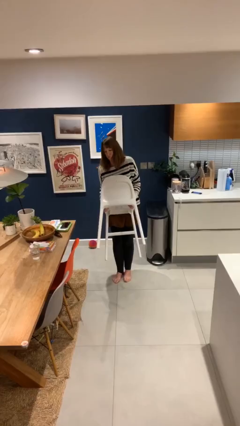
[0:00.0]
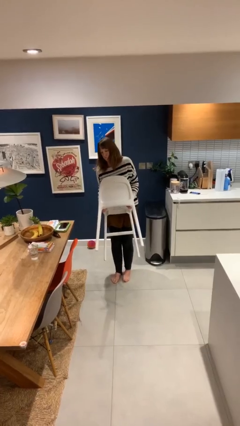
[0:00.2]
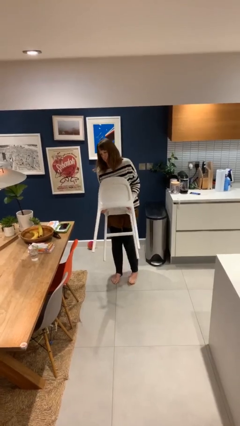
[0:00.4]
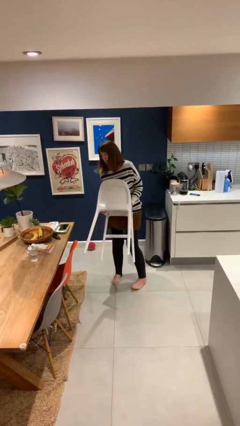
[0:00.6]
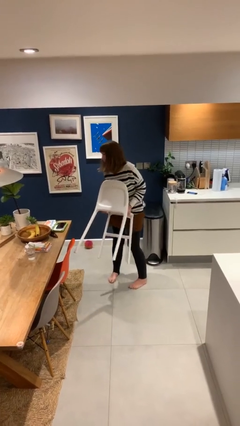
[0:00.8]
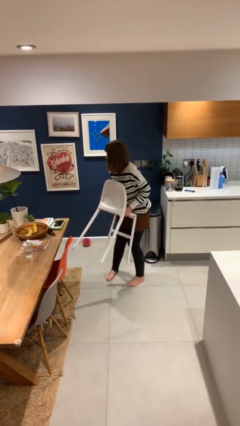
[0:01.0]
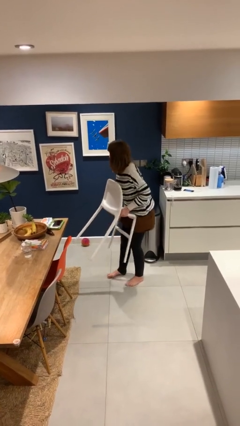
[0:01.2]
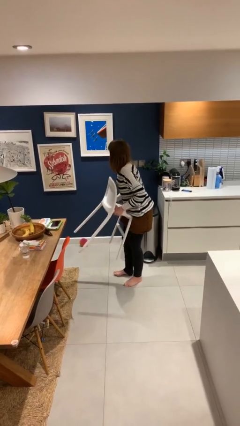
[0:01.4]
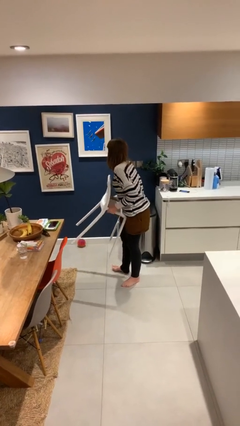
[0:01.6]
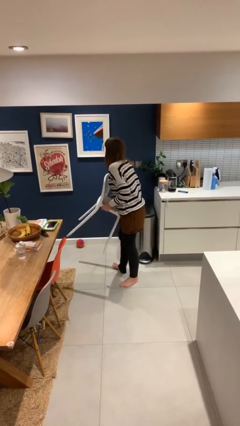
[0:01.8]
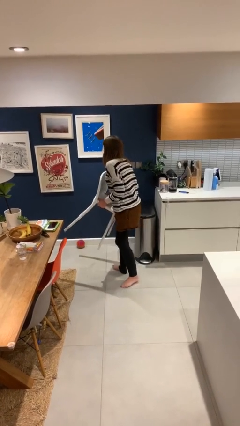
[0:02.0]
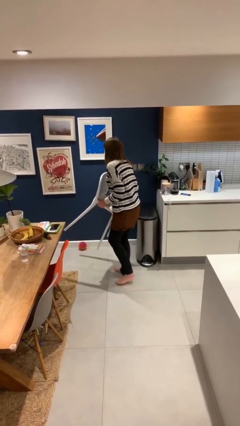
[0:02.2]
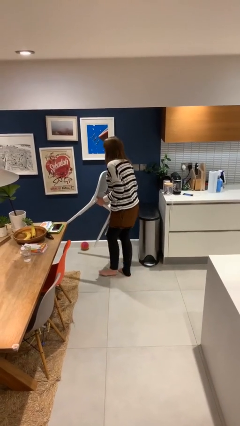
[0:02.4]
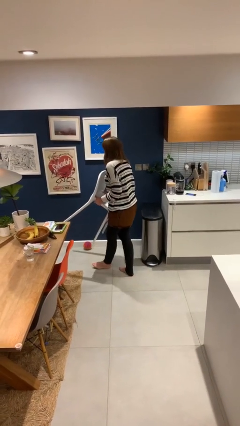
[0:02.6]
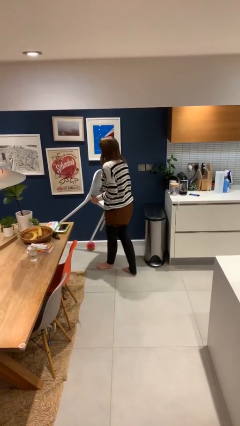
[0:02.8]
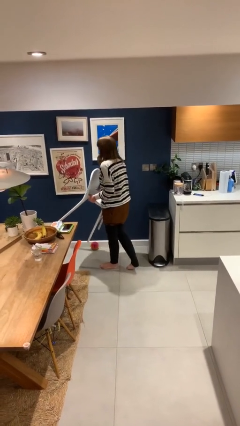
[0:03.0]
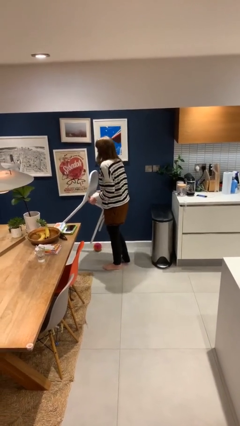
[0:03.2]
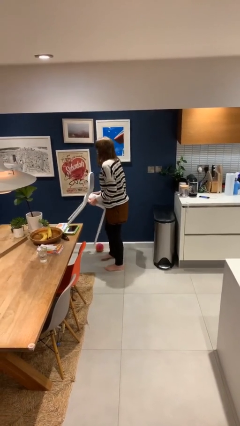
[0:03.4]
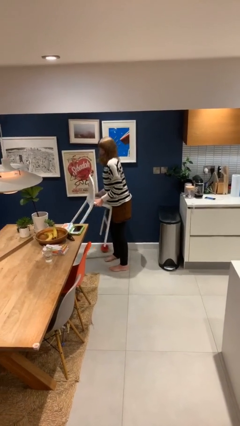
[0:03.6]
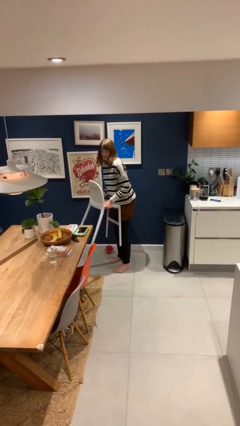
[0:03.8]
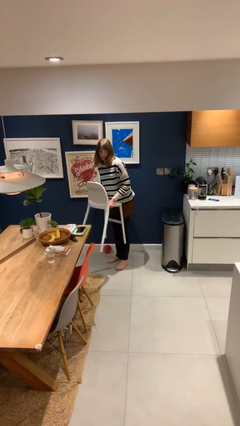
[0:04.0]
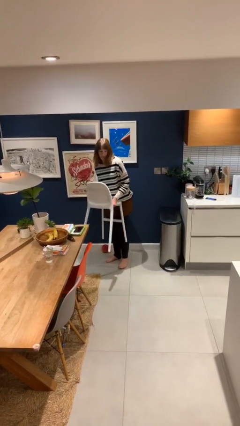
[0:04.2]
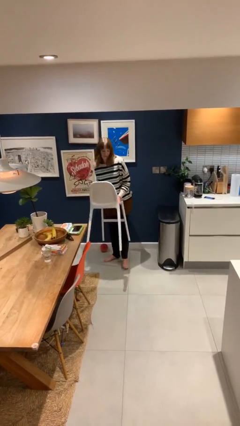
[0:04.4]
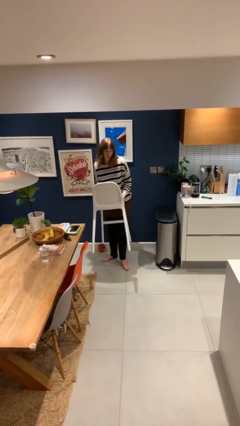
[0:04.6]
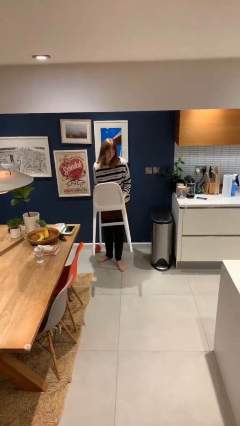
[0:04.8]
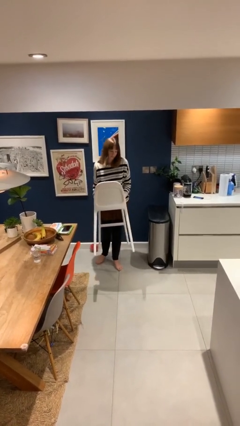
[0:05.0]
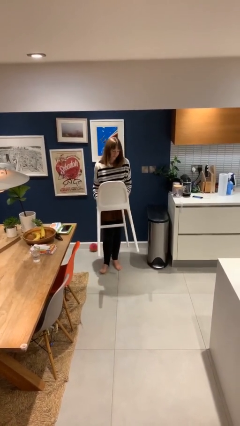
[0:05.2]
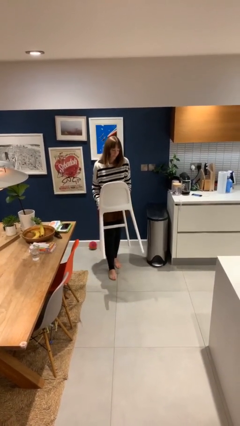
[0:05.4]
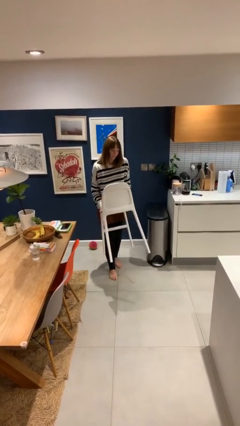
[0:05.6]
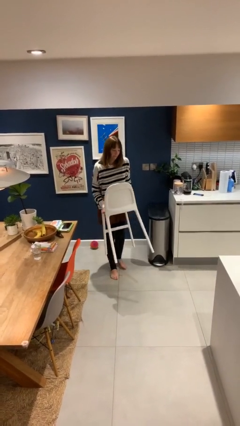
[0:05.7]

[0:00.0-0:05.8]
person carries heavy object

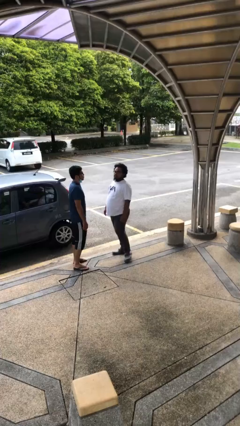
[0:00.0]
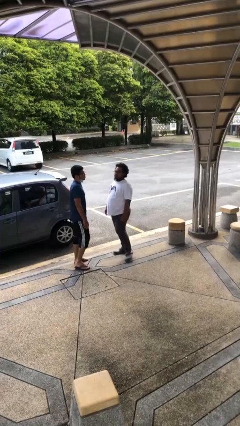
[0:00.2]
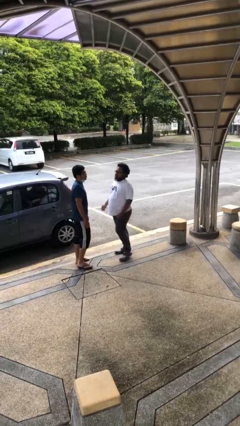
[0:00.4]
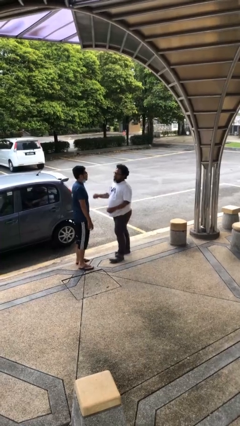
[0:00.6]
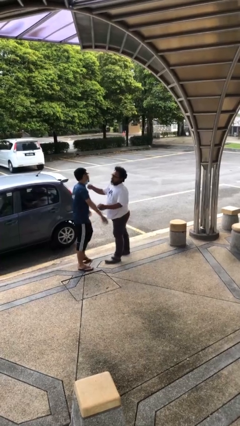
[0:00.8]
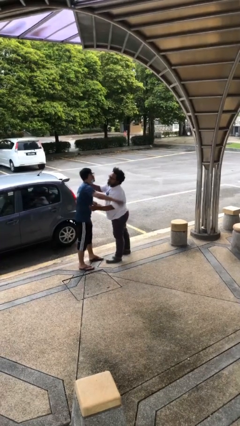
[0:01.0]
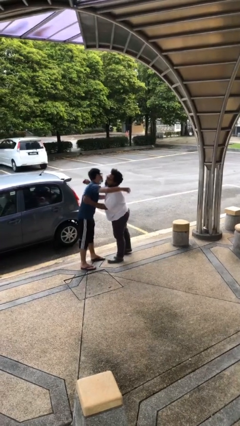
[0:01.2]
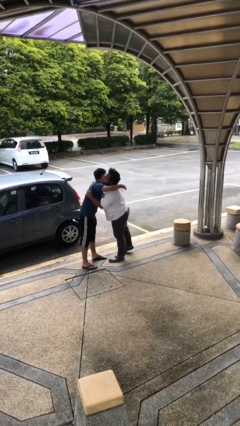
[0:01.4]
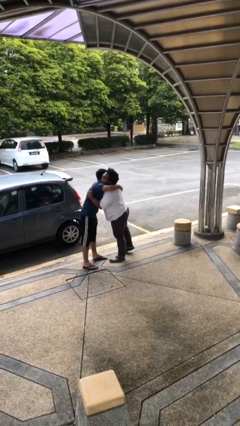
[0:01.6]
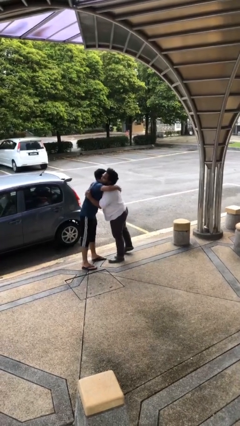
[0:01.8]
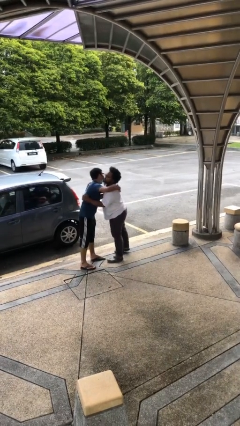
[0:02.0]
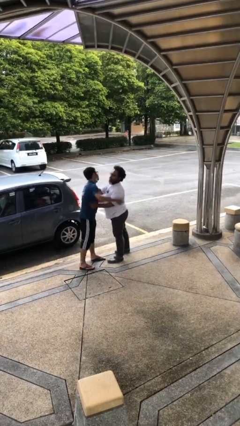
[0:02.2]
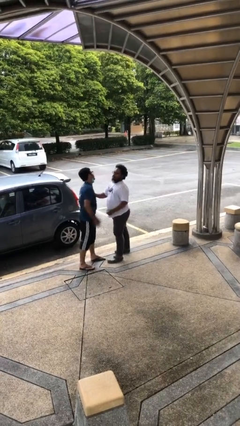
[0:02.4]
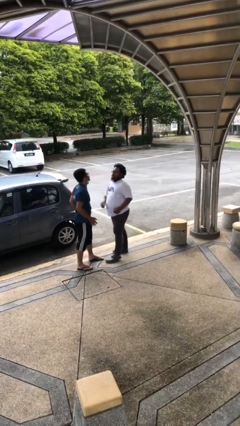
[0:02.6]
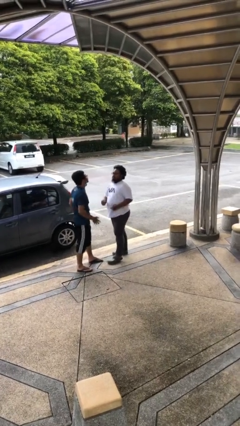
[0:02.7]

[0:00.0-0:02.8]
person embraces person

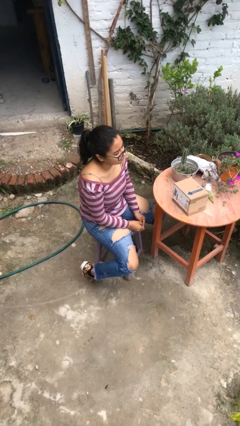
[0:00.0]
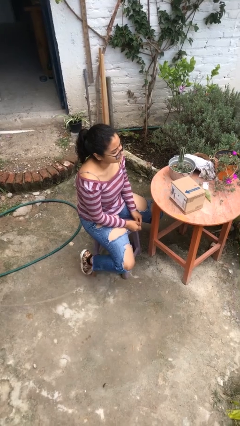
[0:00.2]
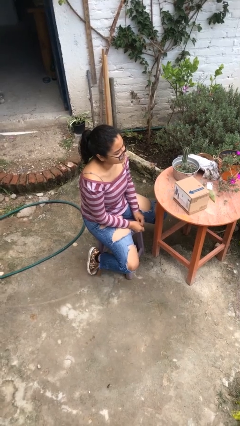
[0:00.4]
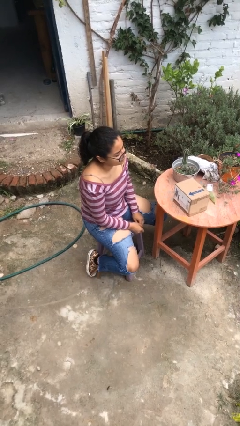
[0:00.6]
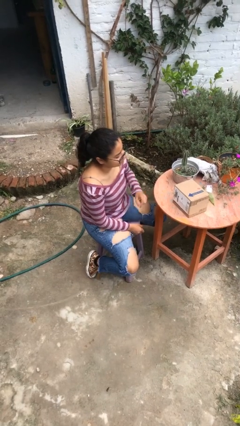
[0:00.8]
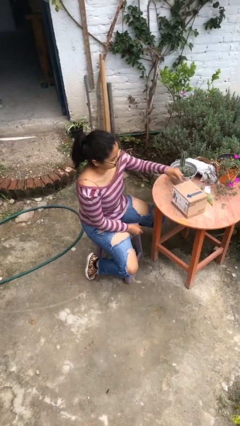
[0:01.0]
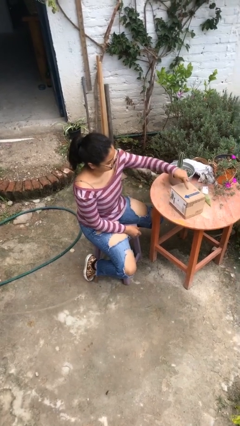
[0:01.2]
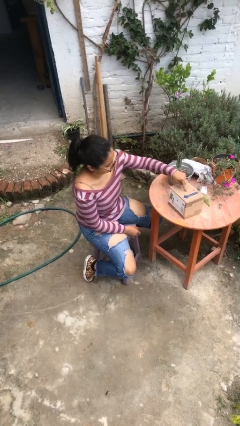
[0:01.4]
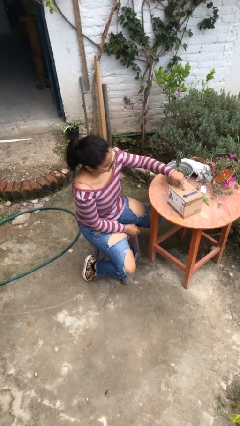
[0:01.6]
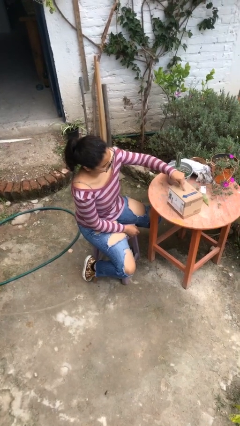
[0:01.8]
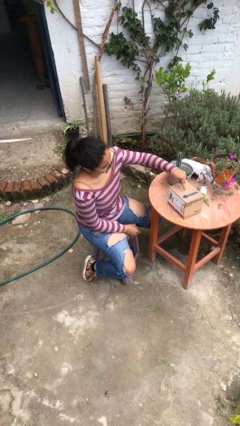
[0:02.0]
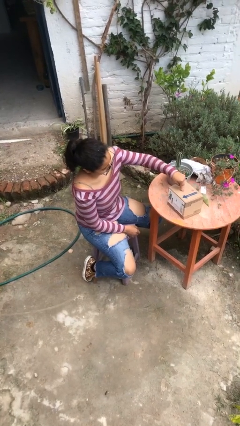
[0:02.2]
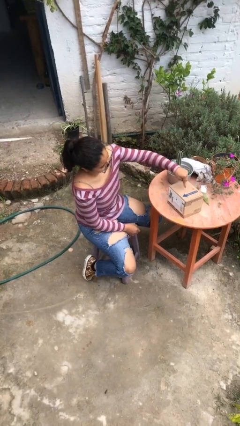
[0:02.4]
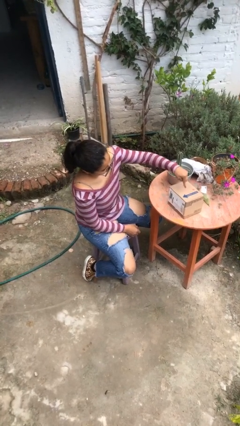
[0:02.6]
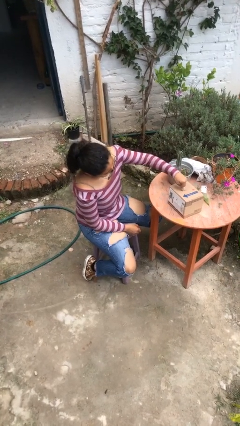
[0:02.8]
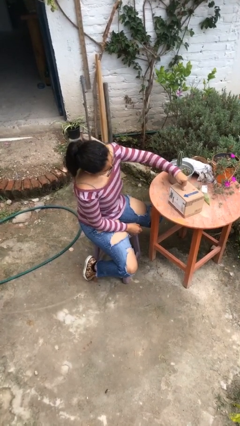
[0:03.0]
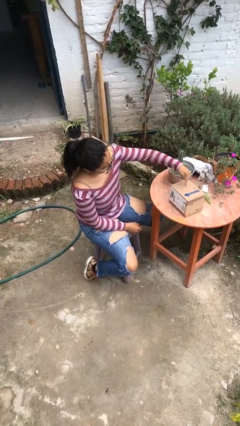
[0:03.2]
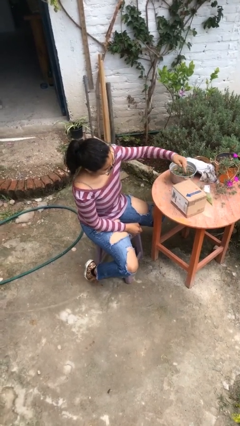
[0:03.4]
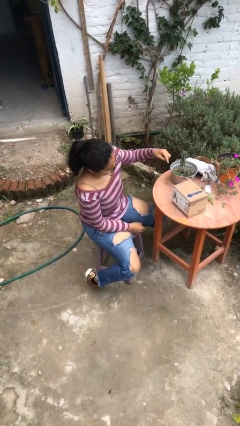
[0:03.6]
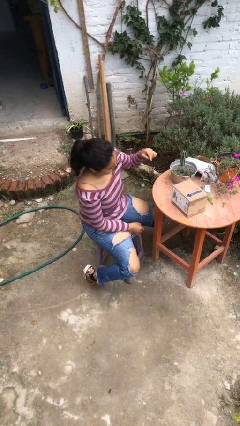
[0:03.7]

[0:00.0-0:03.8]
person taps object with finger

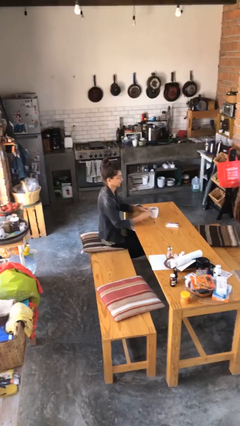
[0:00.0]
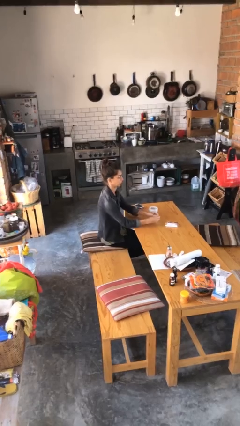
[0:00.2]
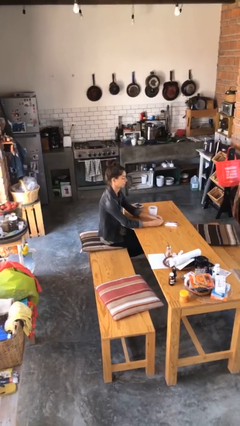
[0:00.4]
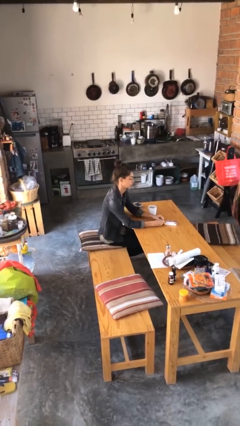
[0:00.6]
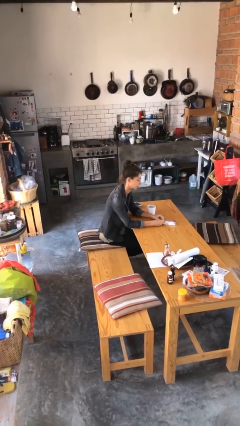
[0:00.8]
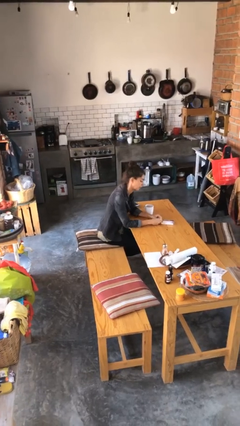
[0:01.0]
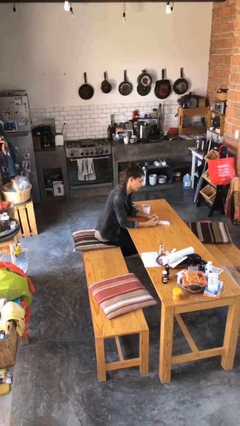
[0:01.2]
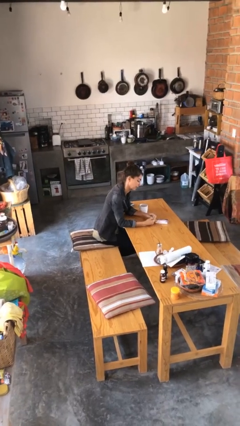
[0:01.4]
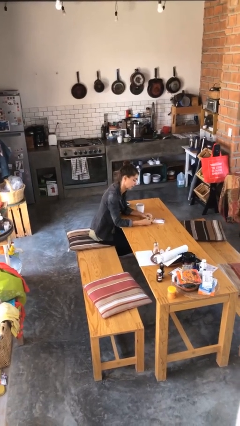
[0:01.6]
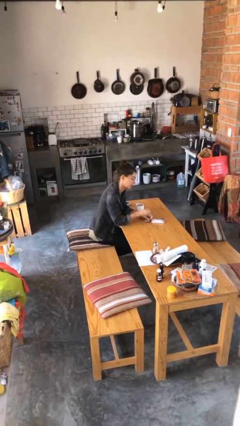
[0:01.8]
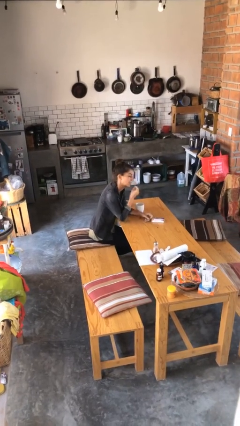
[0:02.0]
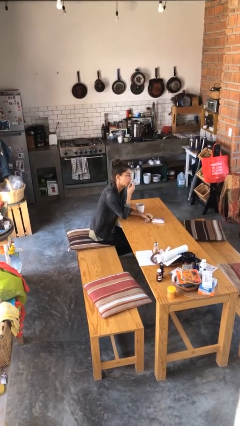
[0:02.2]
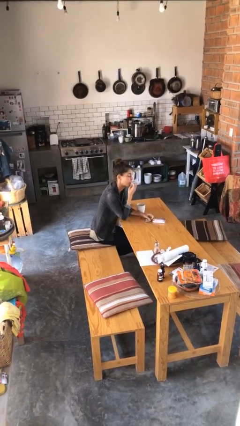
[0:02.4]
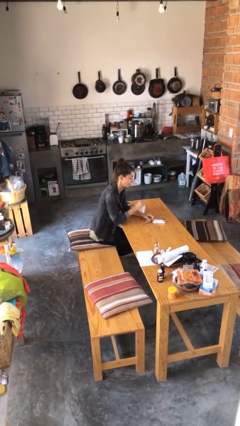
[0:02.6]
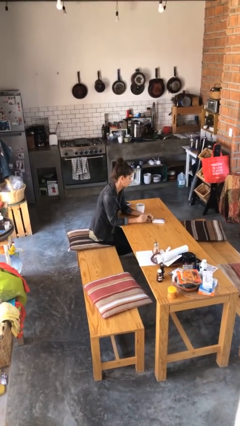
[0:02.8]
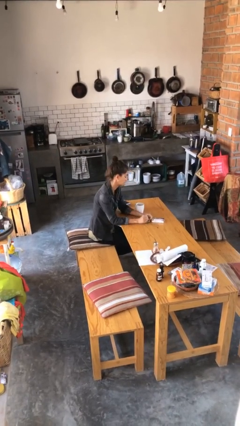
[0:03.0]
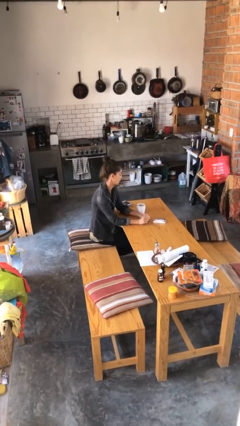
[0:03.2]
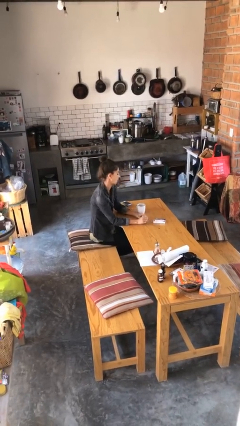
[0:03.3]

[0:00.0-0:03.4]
person takes medicine pills

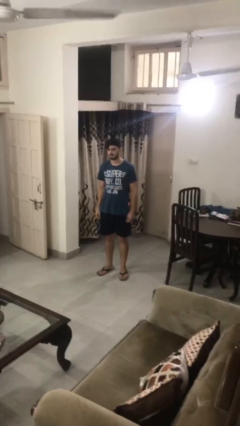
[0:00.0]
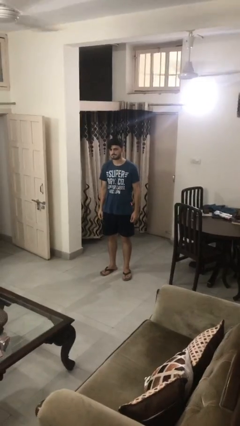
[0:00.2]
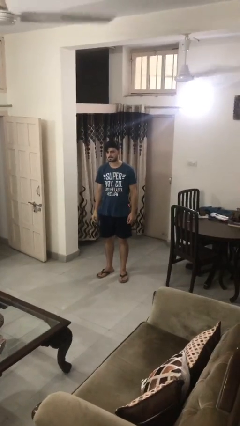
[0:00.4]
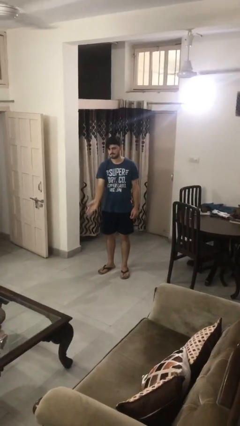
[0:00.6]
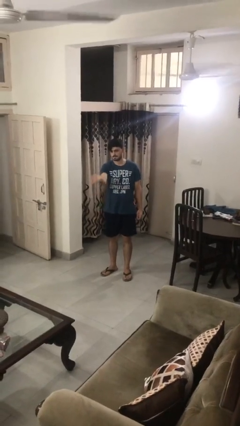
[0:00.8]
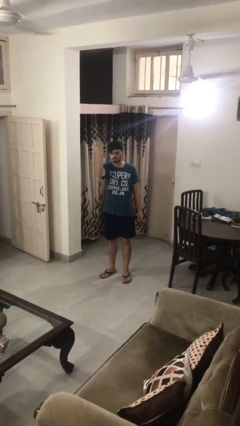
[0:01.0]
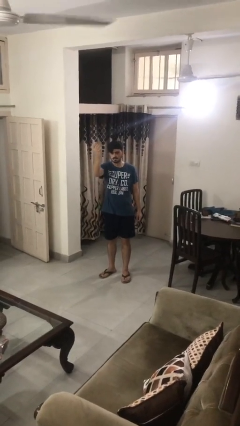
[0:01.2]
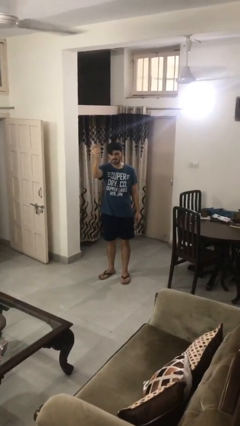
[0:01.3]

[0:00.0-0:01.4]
person gestures swipe up

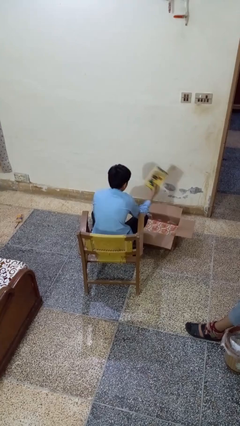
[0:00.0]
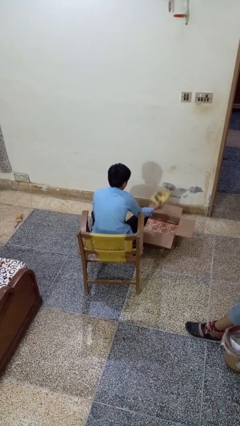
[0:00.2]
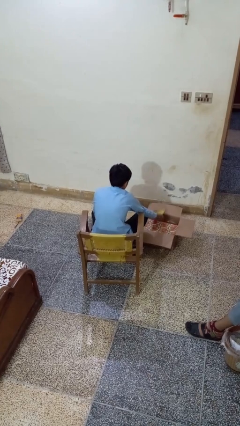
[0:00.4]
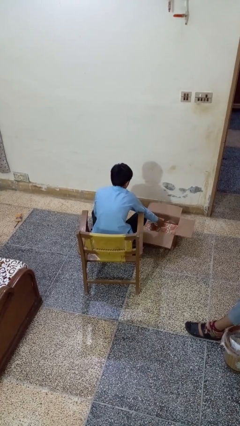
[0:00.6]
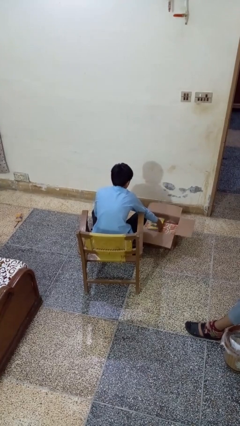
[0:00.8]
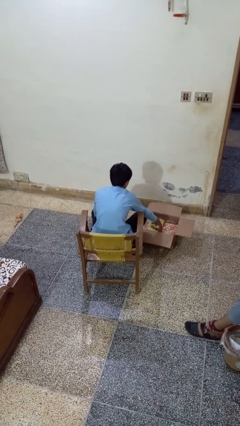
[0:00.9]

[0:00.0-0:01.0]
person puts object into box
